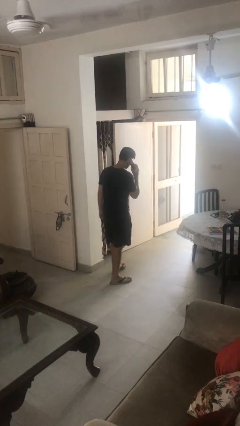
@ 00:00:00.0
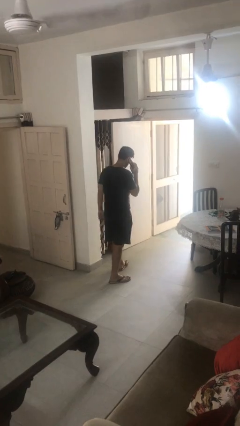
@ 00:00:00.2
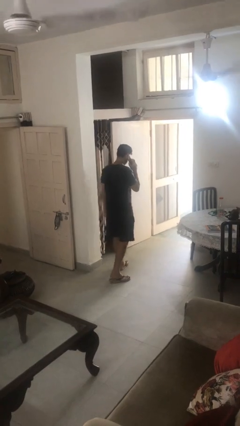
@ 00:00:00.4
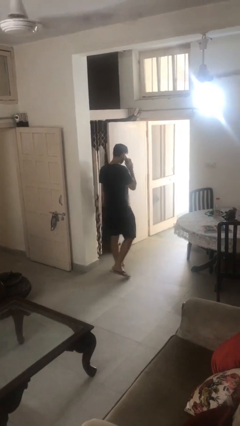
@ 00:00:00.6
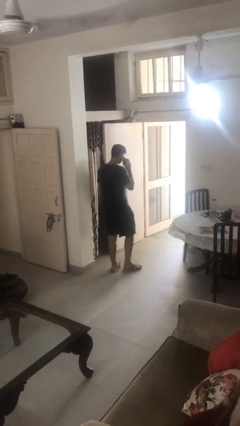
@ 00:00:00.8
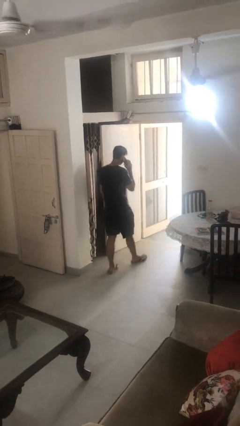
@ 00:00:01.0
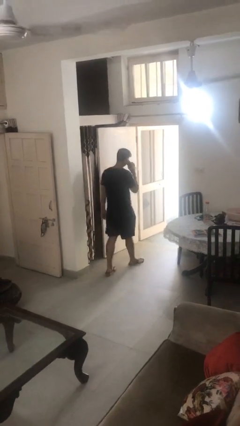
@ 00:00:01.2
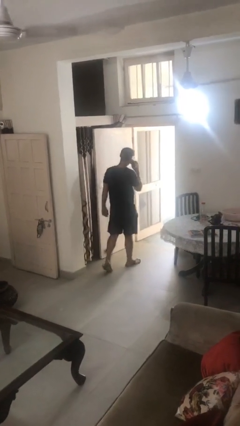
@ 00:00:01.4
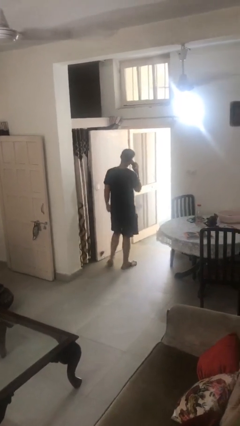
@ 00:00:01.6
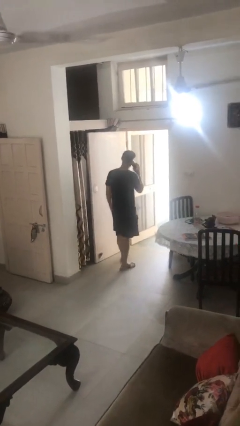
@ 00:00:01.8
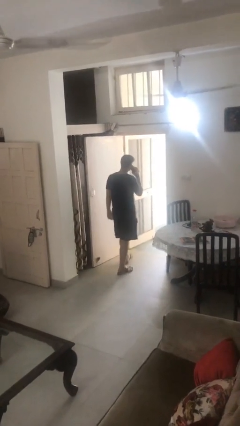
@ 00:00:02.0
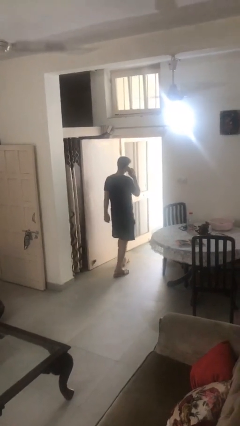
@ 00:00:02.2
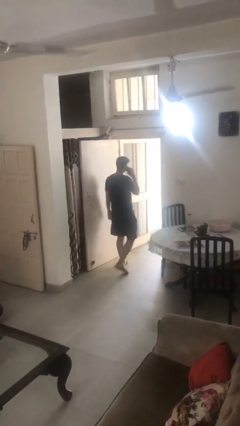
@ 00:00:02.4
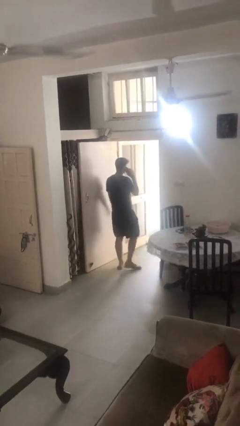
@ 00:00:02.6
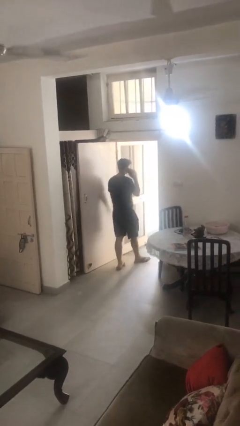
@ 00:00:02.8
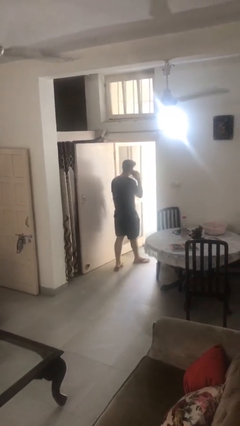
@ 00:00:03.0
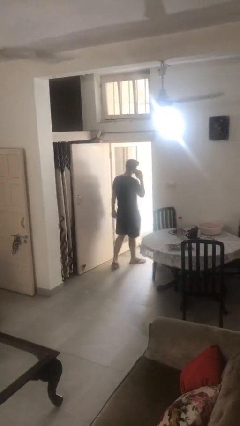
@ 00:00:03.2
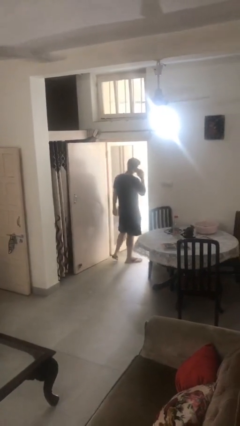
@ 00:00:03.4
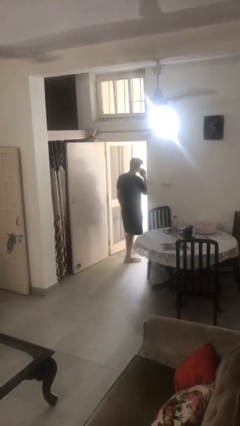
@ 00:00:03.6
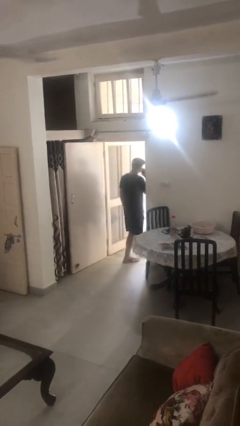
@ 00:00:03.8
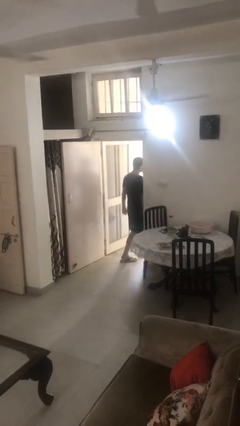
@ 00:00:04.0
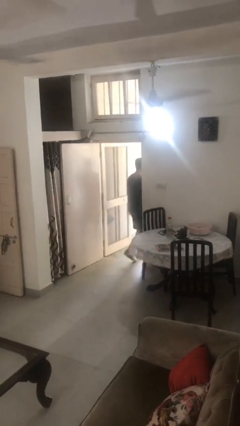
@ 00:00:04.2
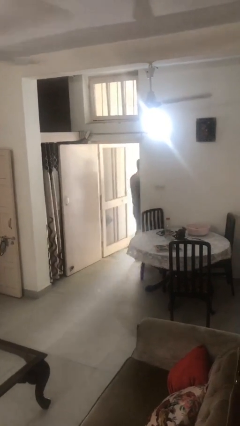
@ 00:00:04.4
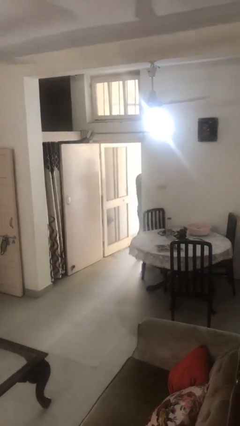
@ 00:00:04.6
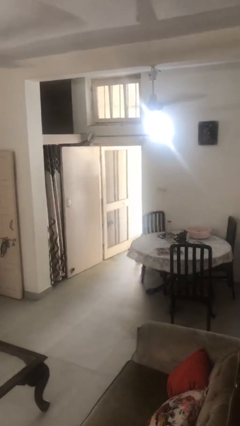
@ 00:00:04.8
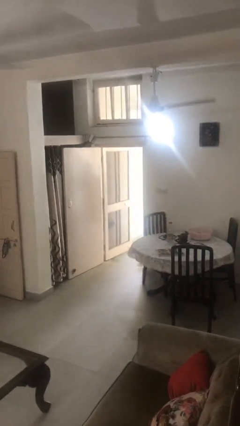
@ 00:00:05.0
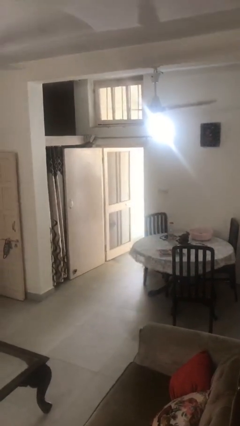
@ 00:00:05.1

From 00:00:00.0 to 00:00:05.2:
person exits scene through structure

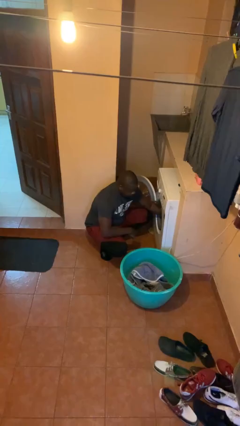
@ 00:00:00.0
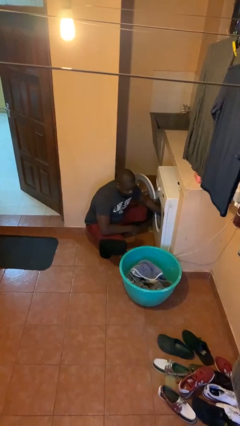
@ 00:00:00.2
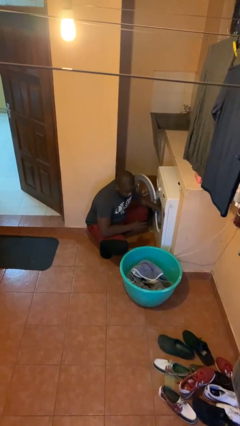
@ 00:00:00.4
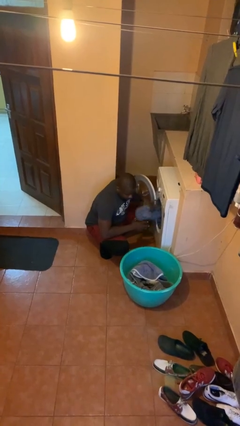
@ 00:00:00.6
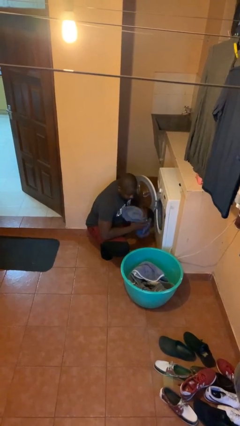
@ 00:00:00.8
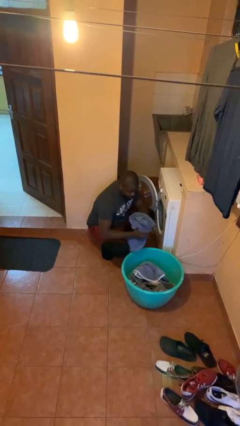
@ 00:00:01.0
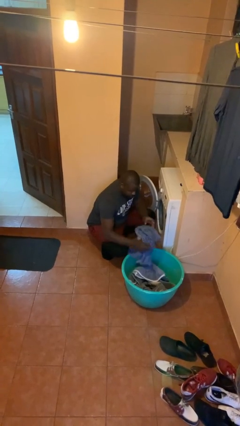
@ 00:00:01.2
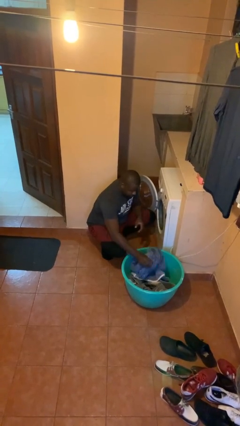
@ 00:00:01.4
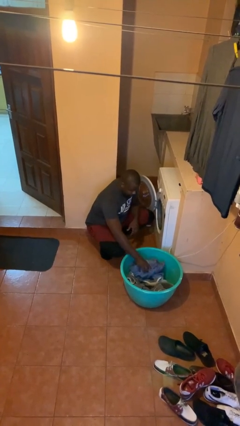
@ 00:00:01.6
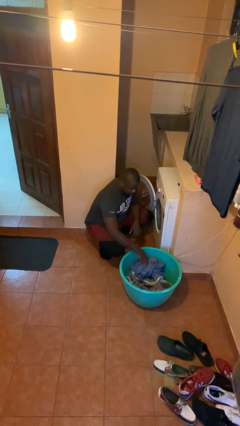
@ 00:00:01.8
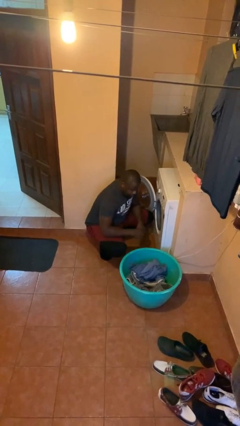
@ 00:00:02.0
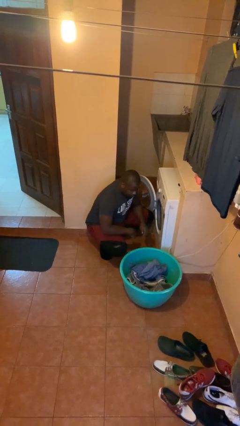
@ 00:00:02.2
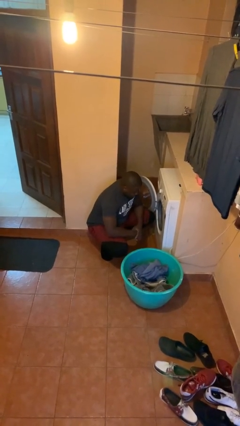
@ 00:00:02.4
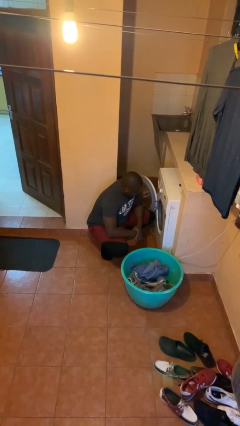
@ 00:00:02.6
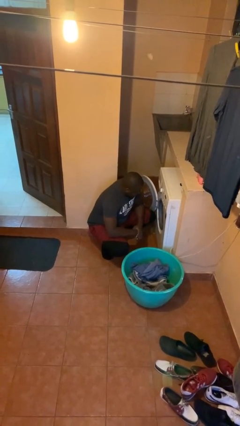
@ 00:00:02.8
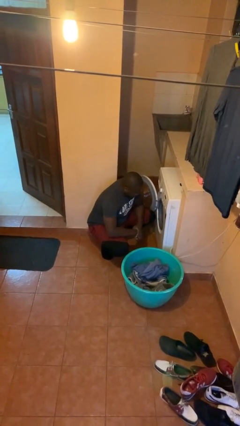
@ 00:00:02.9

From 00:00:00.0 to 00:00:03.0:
person unloads dryer

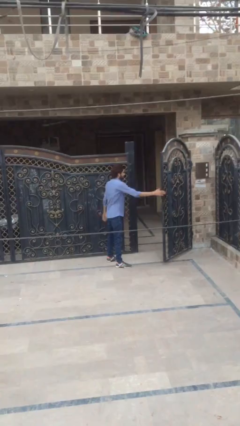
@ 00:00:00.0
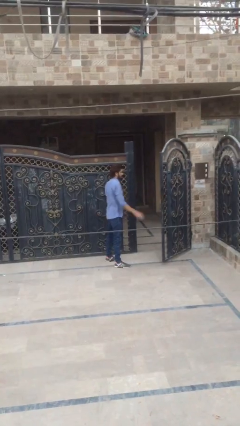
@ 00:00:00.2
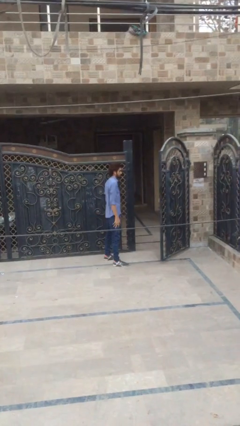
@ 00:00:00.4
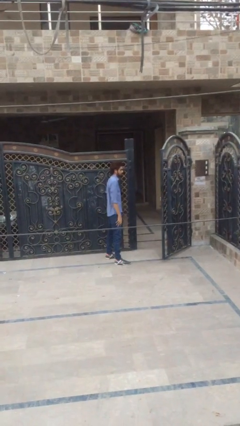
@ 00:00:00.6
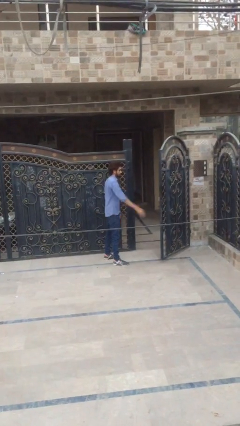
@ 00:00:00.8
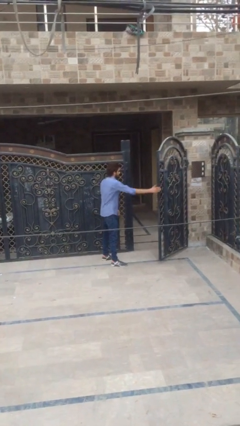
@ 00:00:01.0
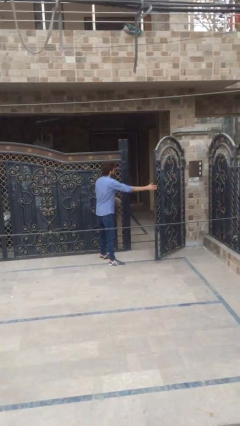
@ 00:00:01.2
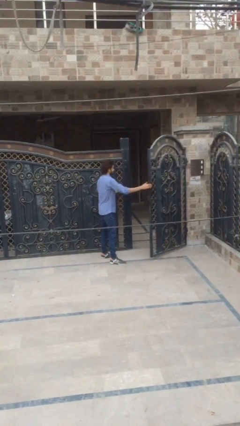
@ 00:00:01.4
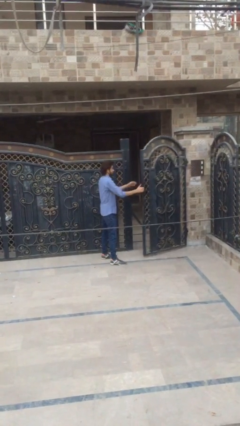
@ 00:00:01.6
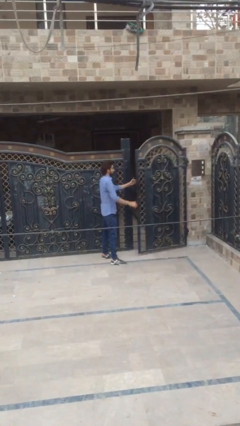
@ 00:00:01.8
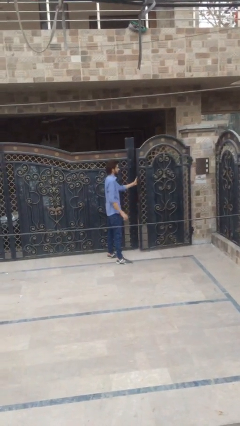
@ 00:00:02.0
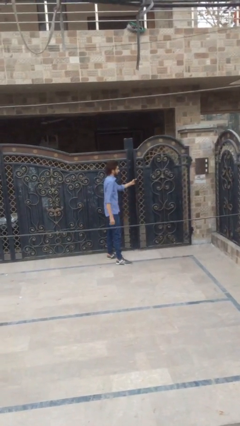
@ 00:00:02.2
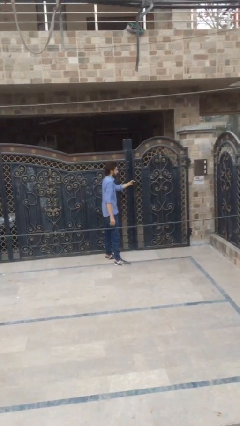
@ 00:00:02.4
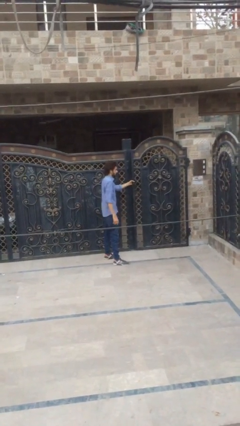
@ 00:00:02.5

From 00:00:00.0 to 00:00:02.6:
person closes facility door

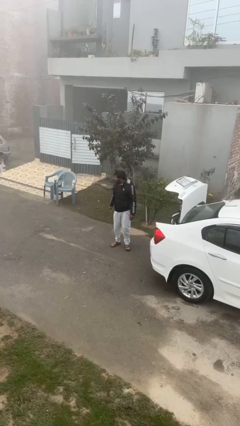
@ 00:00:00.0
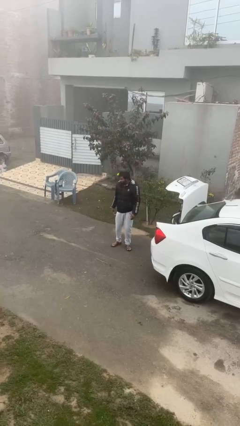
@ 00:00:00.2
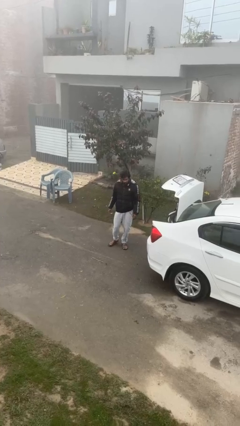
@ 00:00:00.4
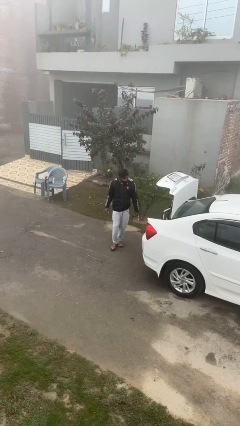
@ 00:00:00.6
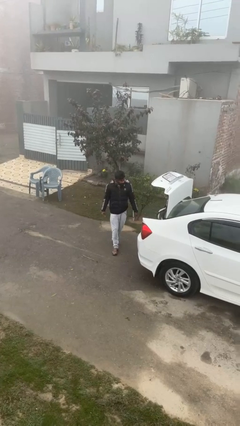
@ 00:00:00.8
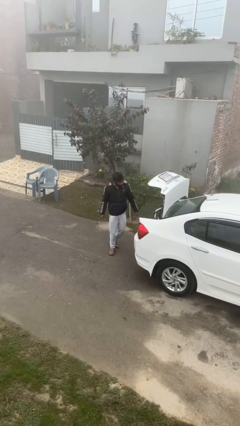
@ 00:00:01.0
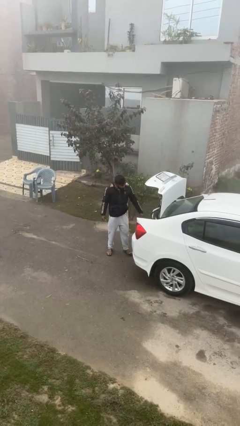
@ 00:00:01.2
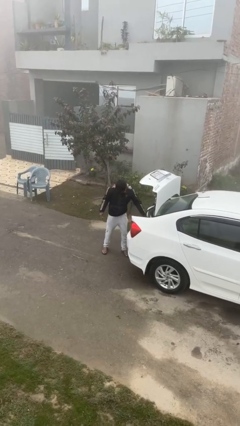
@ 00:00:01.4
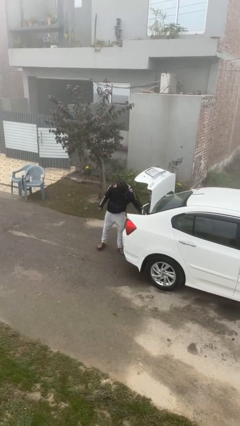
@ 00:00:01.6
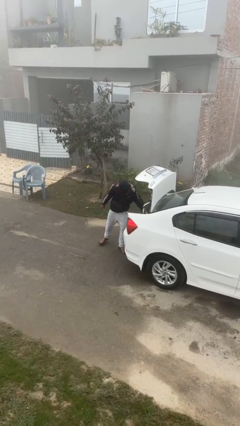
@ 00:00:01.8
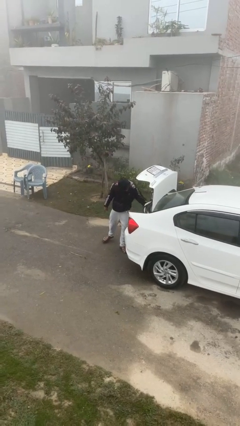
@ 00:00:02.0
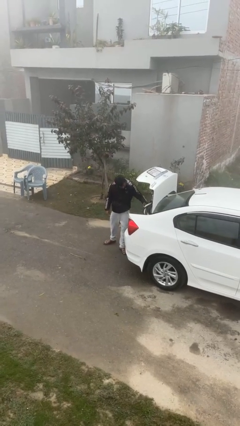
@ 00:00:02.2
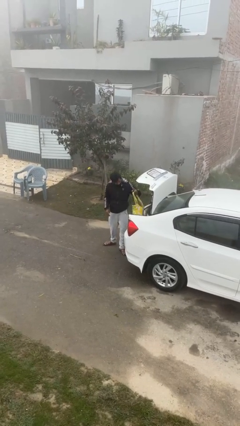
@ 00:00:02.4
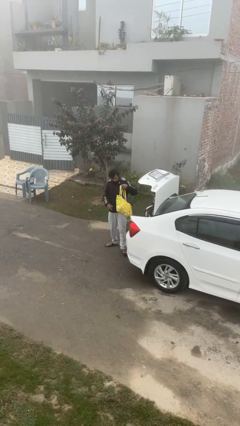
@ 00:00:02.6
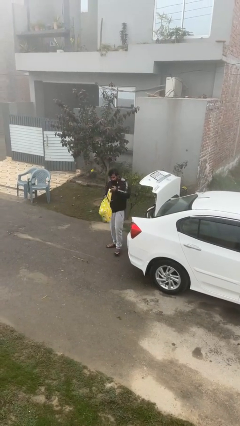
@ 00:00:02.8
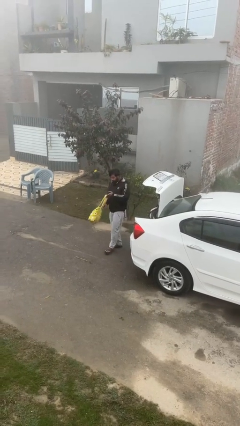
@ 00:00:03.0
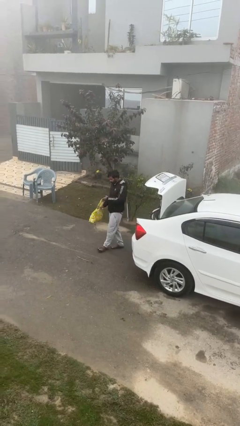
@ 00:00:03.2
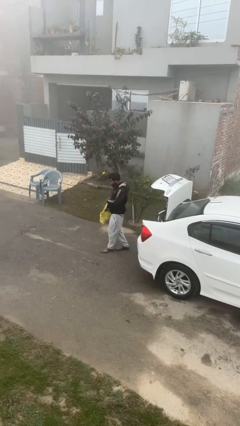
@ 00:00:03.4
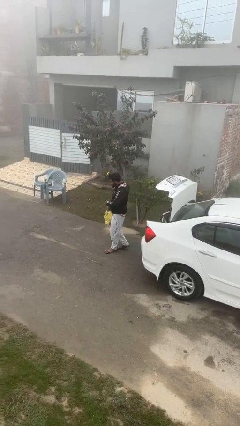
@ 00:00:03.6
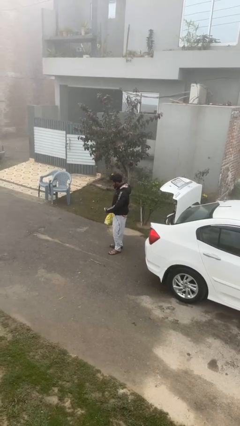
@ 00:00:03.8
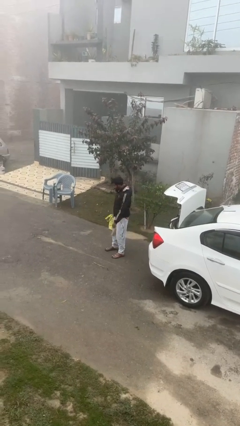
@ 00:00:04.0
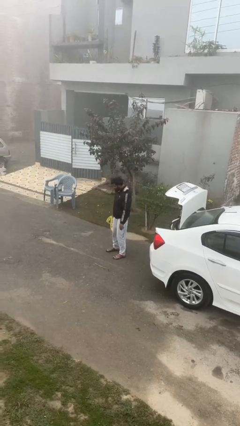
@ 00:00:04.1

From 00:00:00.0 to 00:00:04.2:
person unloads car

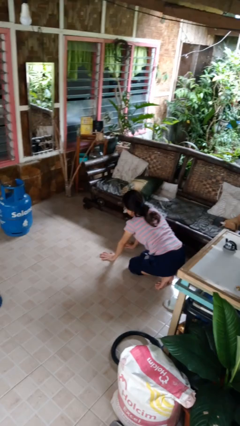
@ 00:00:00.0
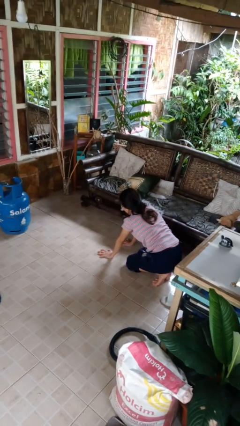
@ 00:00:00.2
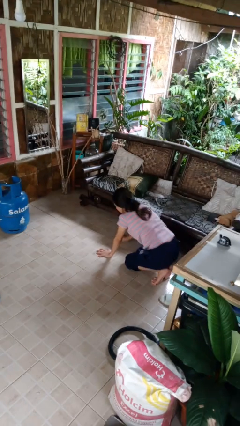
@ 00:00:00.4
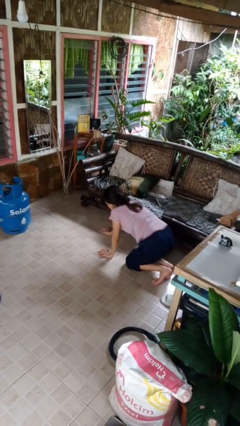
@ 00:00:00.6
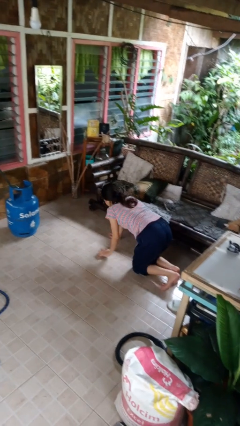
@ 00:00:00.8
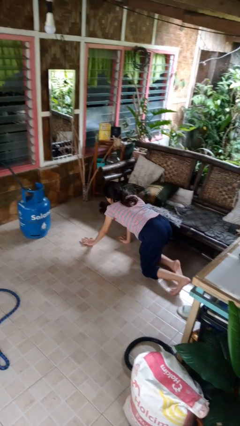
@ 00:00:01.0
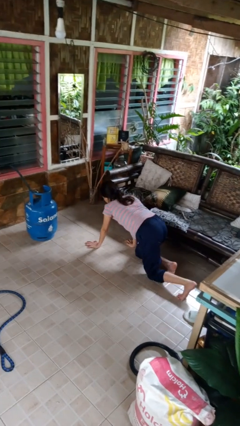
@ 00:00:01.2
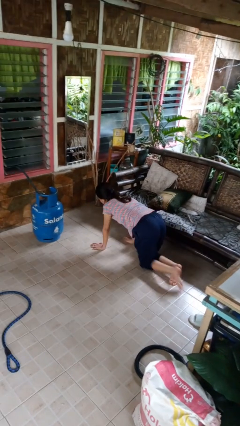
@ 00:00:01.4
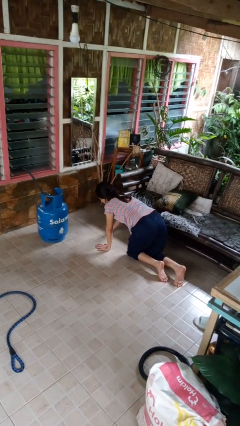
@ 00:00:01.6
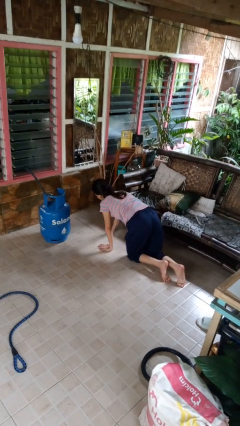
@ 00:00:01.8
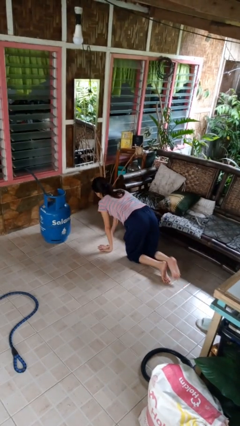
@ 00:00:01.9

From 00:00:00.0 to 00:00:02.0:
person crawls

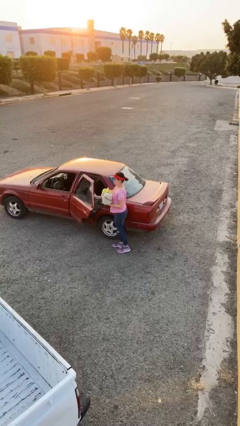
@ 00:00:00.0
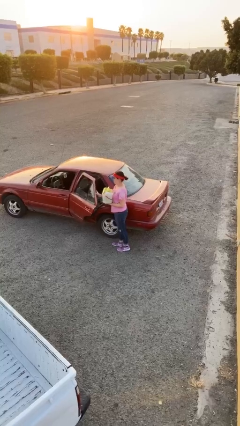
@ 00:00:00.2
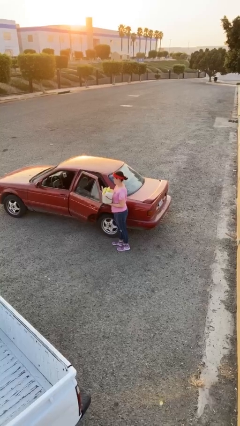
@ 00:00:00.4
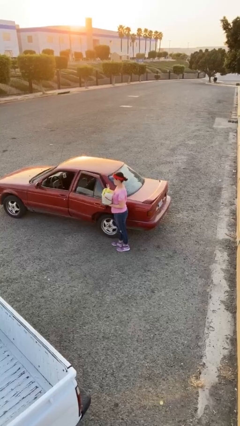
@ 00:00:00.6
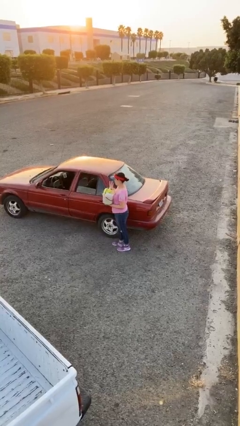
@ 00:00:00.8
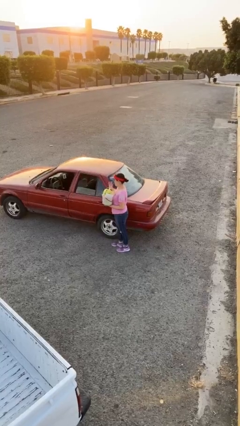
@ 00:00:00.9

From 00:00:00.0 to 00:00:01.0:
person closes car door
